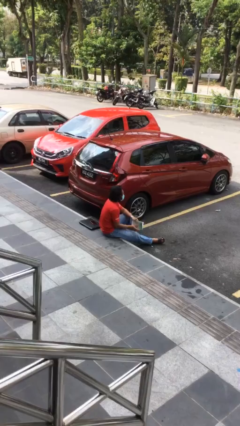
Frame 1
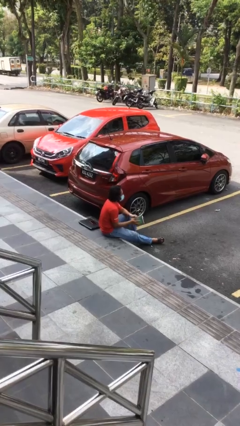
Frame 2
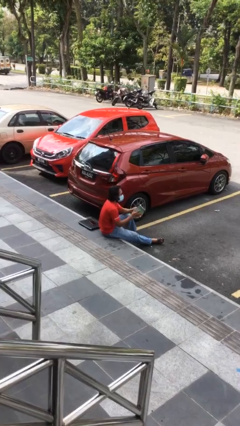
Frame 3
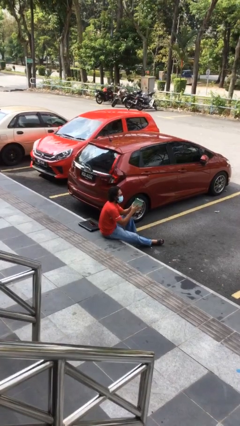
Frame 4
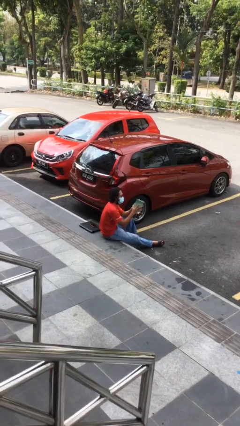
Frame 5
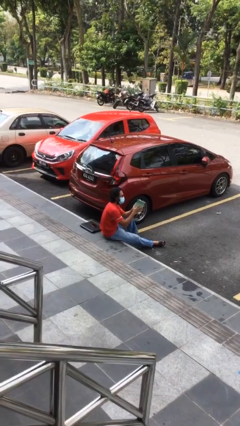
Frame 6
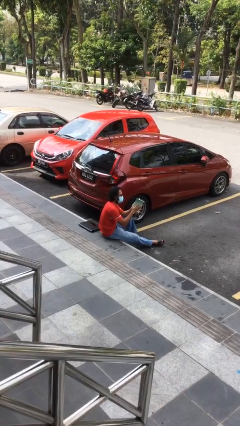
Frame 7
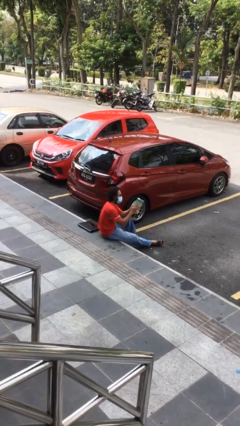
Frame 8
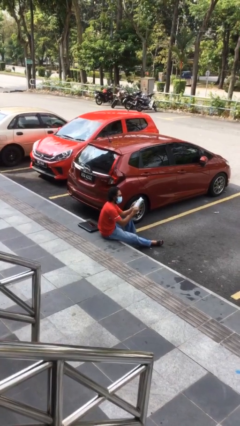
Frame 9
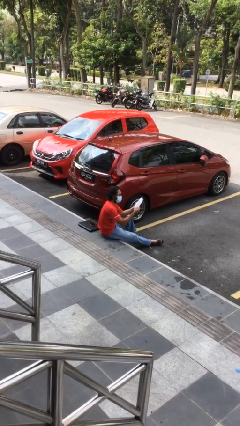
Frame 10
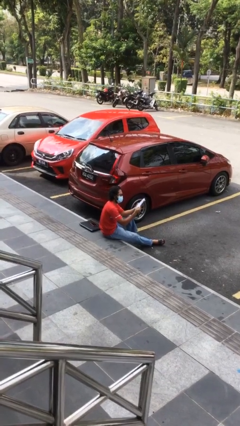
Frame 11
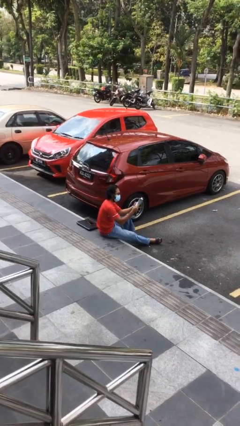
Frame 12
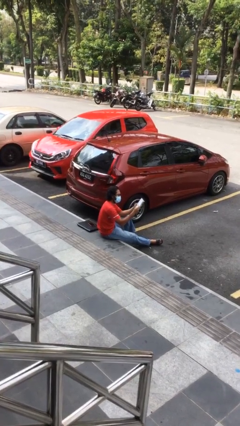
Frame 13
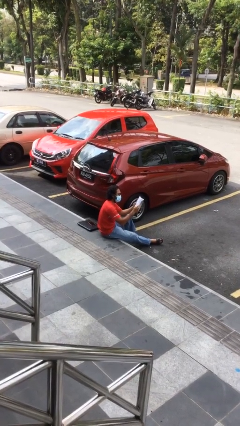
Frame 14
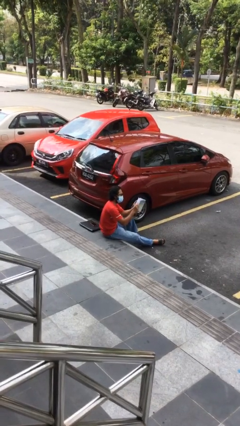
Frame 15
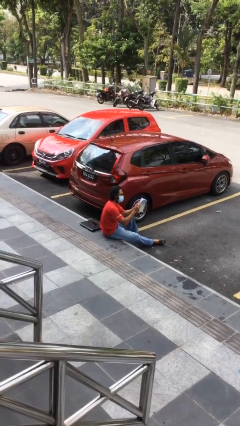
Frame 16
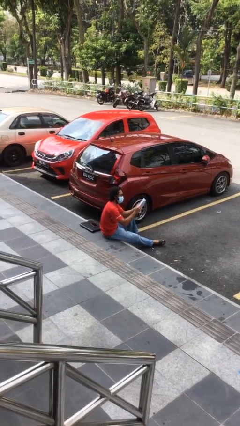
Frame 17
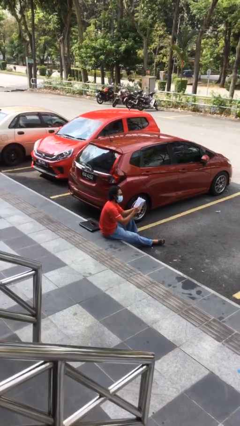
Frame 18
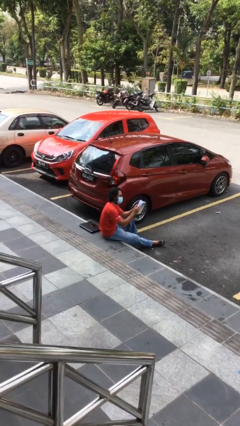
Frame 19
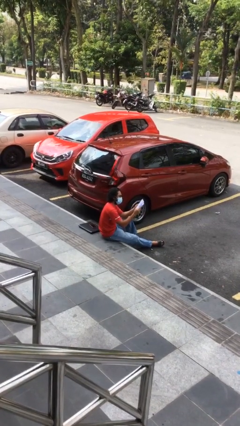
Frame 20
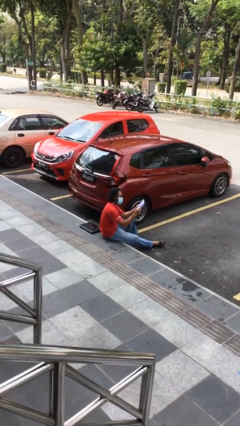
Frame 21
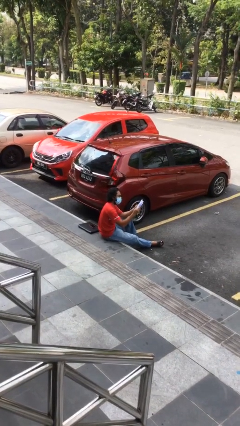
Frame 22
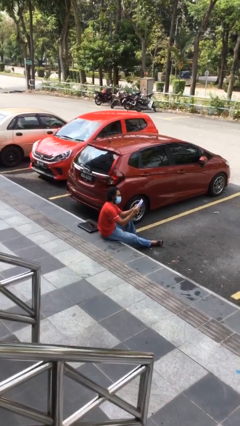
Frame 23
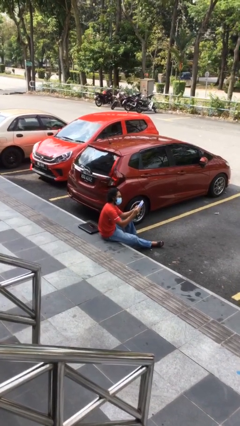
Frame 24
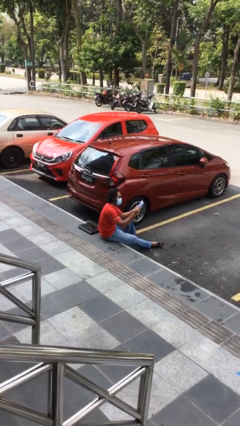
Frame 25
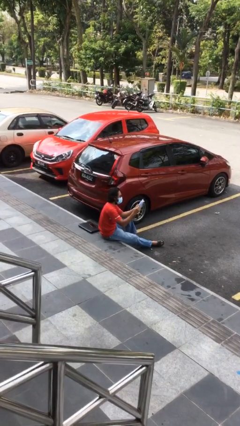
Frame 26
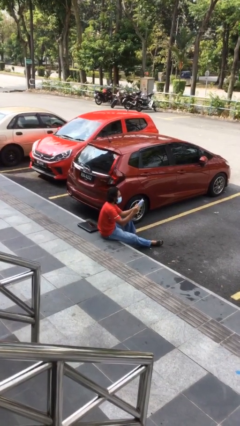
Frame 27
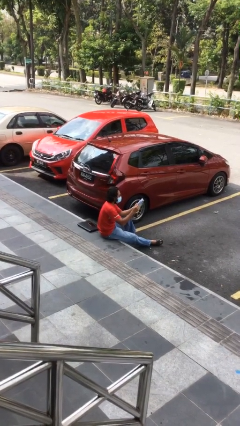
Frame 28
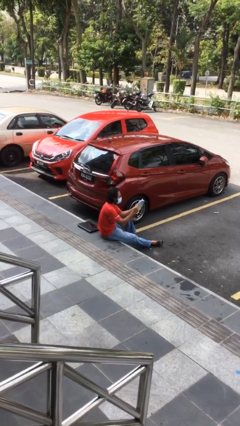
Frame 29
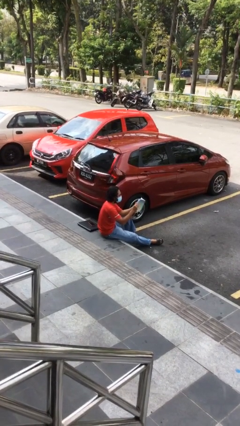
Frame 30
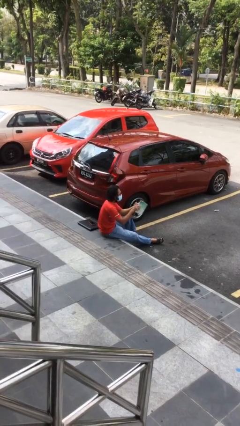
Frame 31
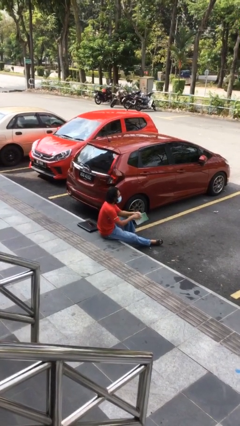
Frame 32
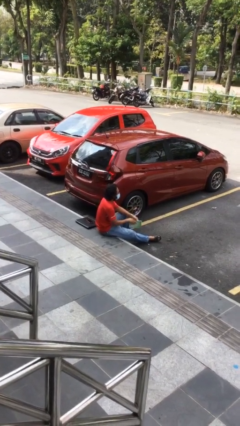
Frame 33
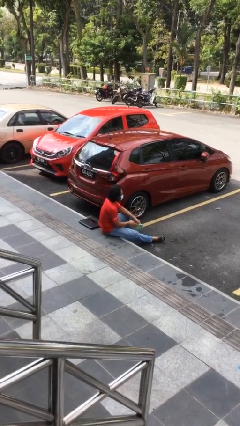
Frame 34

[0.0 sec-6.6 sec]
person reads document

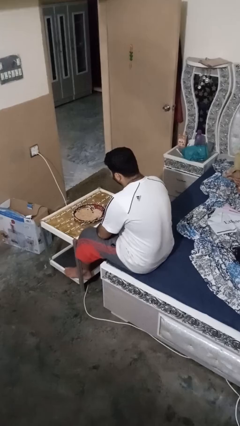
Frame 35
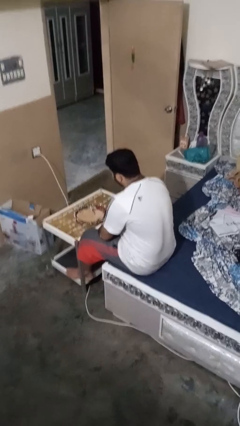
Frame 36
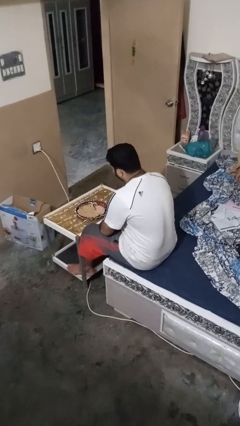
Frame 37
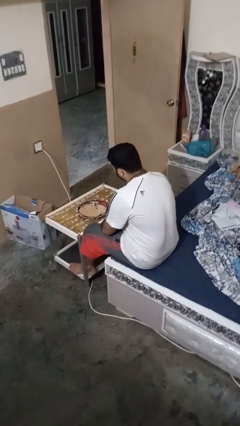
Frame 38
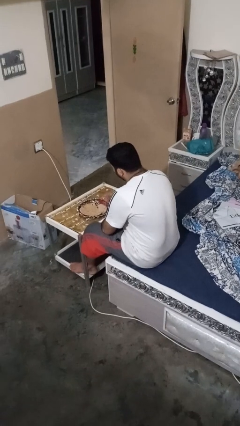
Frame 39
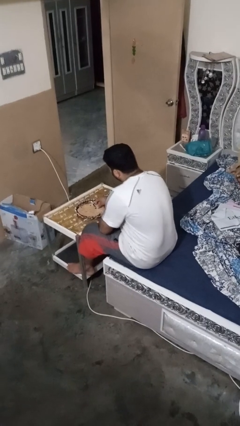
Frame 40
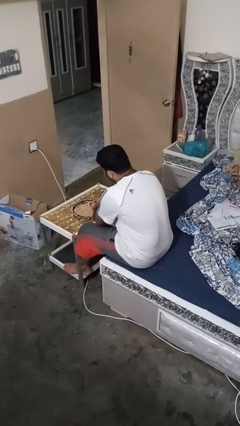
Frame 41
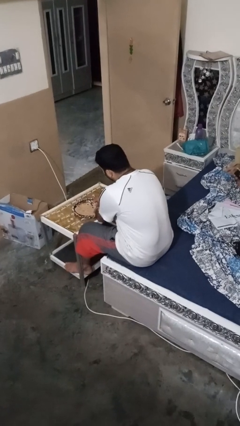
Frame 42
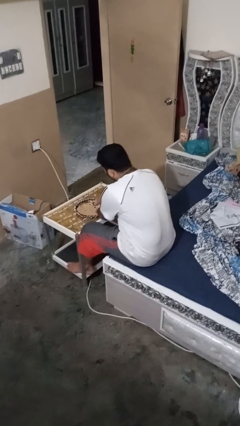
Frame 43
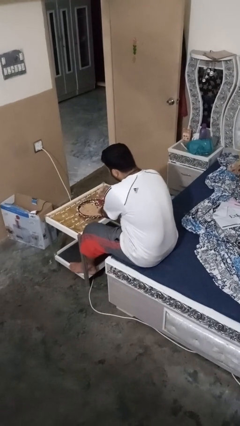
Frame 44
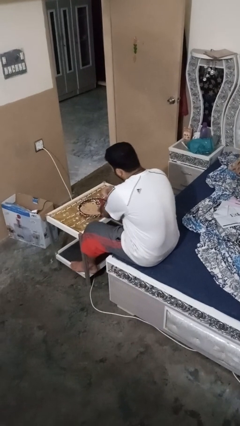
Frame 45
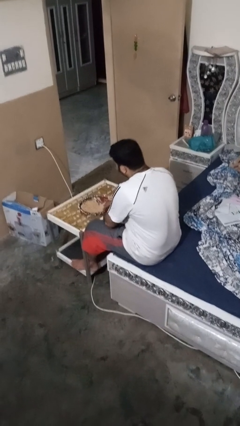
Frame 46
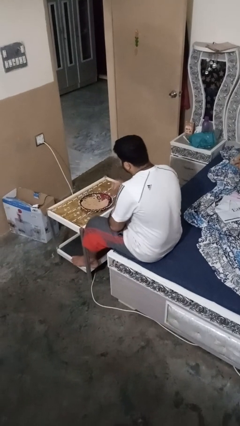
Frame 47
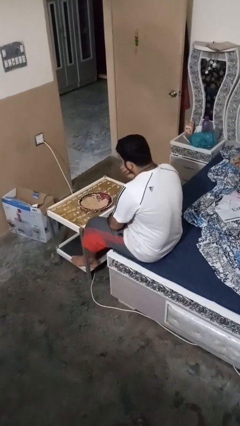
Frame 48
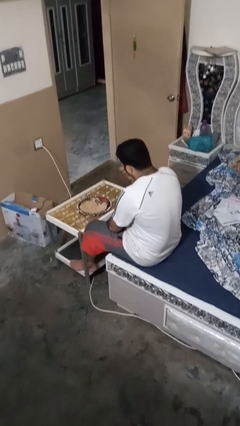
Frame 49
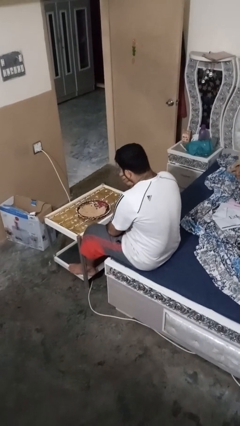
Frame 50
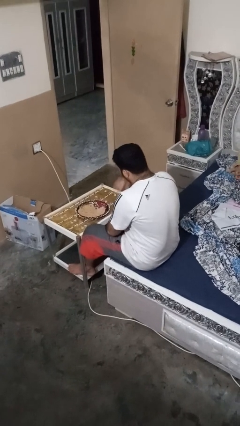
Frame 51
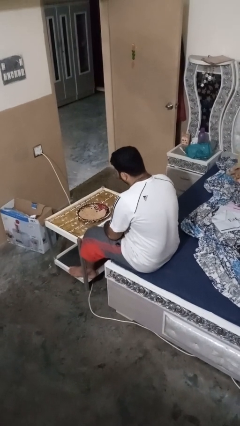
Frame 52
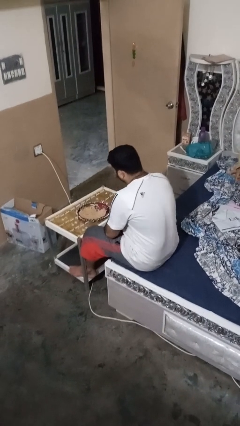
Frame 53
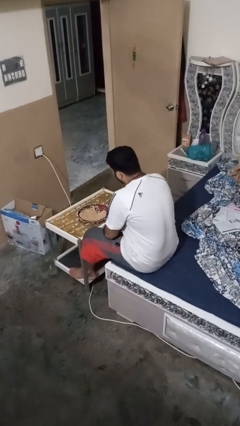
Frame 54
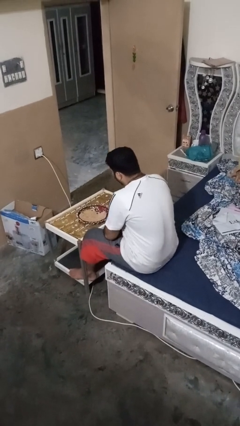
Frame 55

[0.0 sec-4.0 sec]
person eats with hands

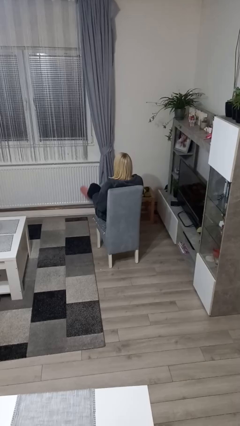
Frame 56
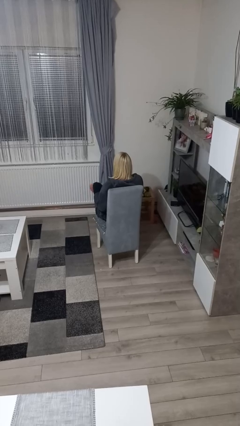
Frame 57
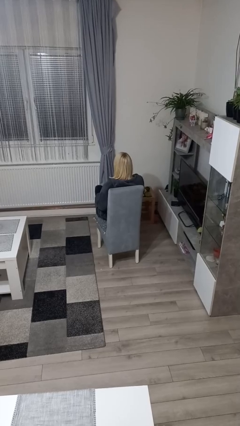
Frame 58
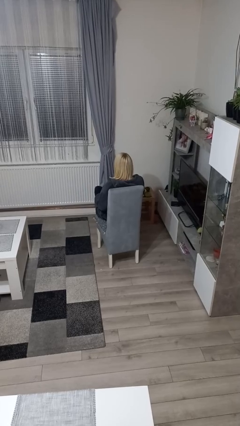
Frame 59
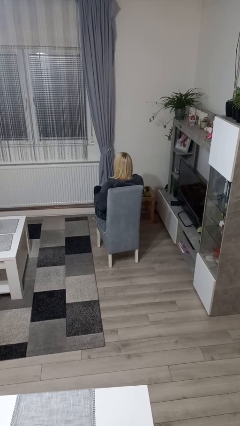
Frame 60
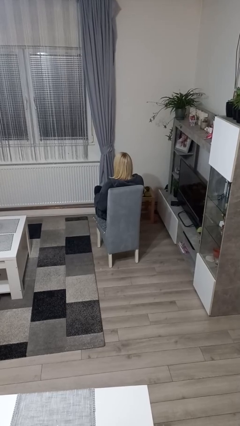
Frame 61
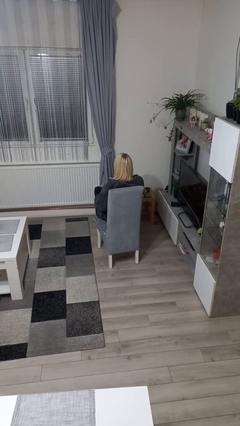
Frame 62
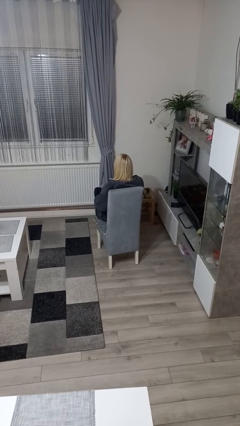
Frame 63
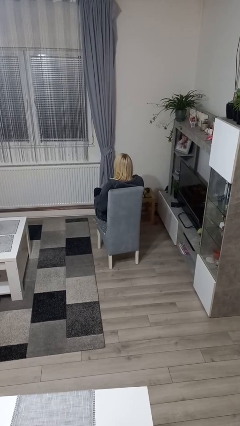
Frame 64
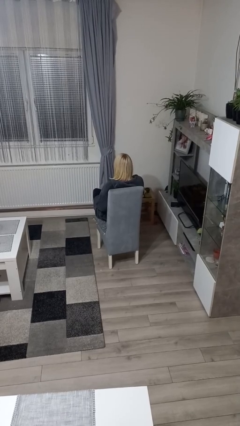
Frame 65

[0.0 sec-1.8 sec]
person crosses legs

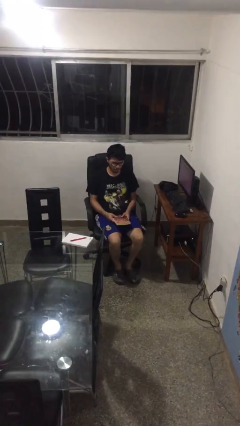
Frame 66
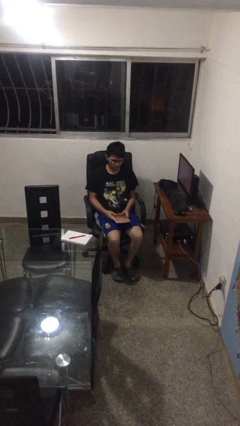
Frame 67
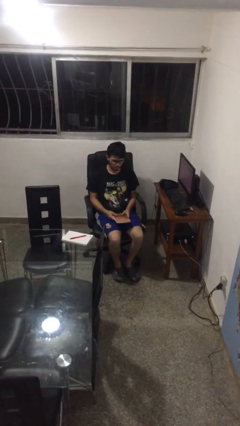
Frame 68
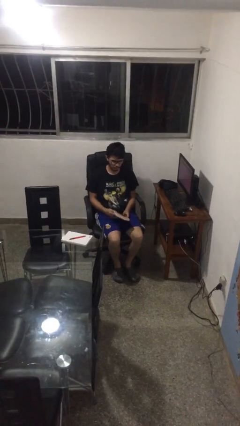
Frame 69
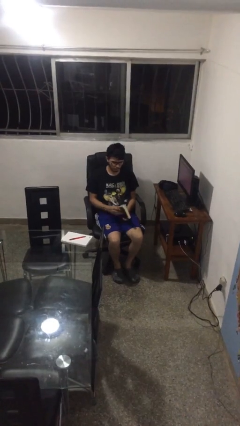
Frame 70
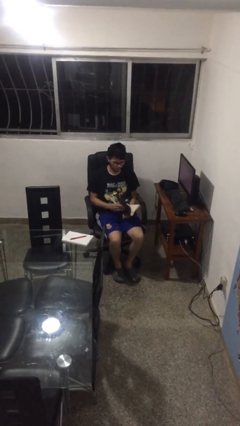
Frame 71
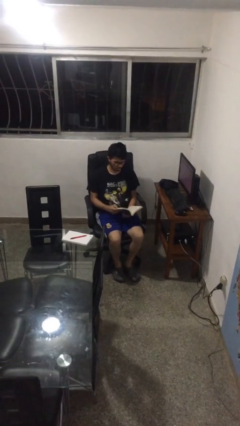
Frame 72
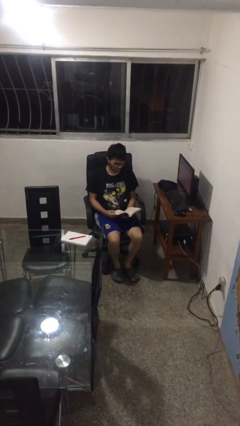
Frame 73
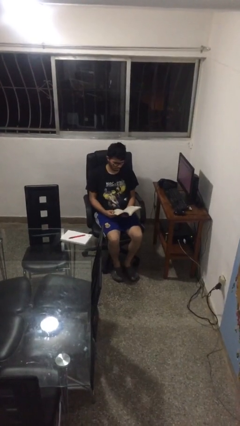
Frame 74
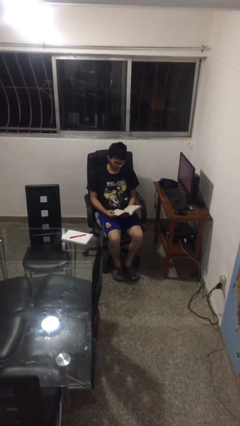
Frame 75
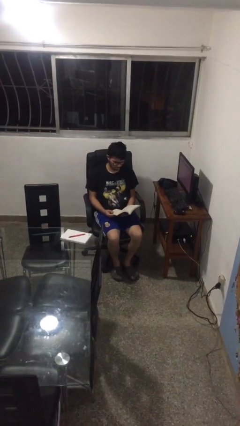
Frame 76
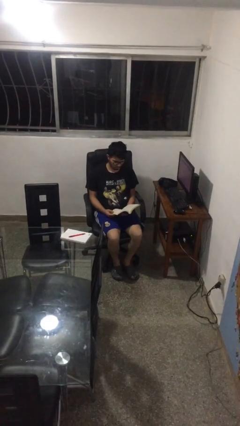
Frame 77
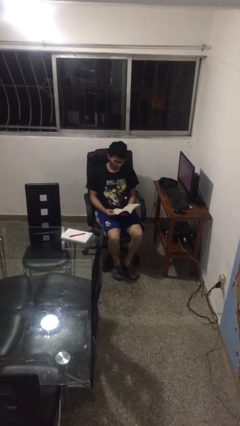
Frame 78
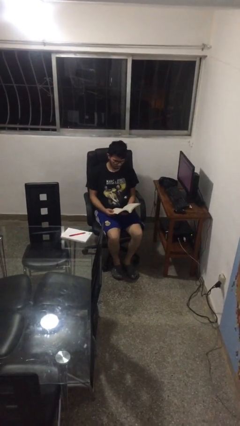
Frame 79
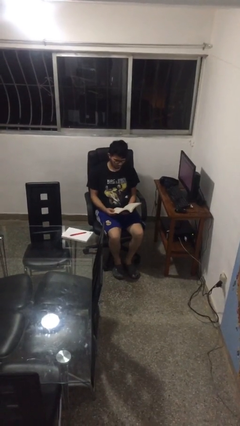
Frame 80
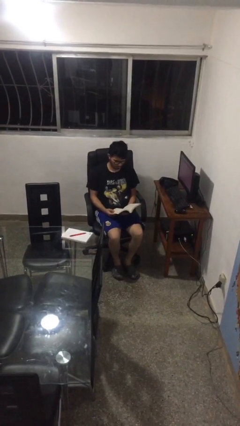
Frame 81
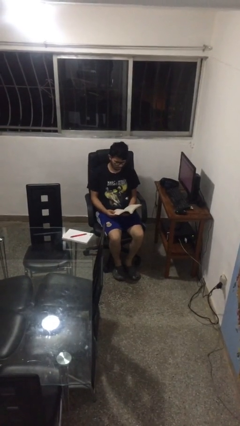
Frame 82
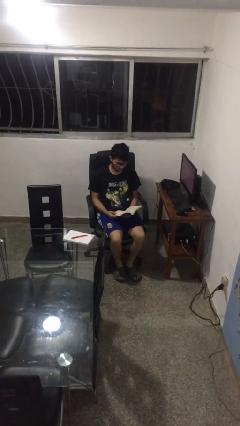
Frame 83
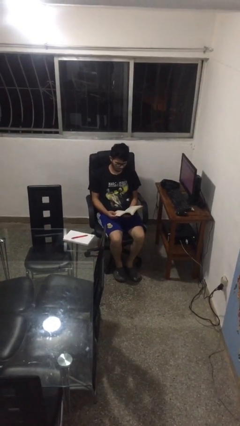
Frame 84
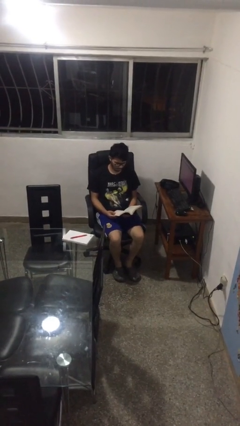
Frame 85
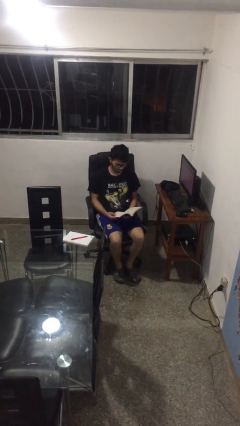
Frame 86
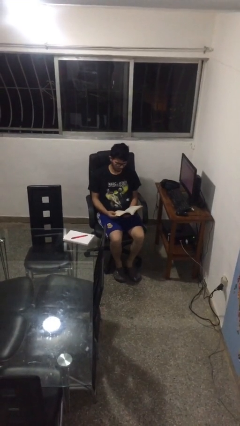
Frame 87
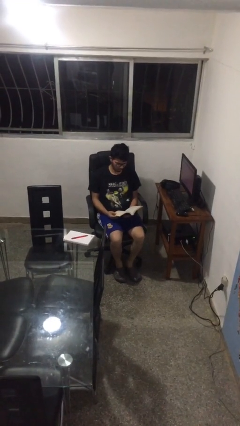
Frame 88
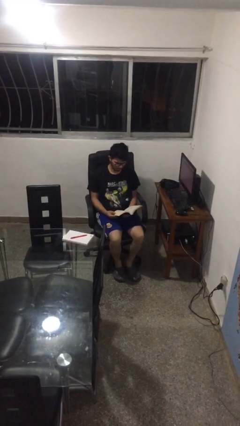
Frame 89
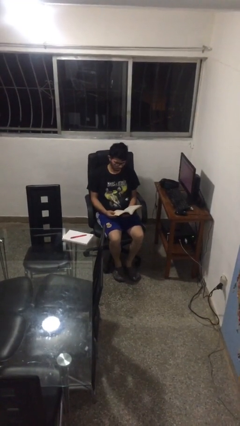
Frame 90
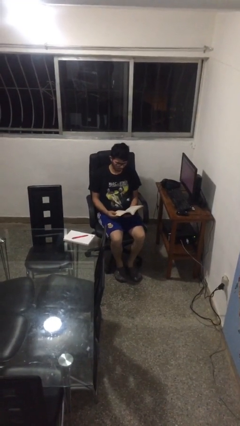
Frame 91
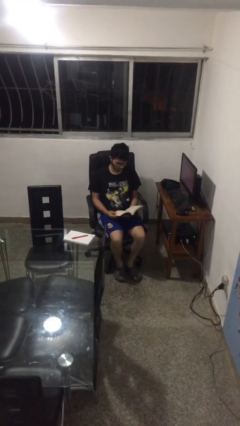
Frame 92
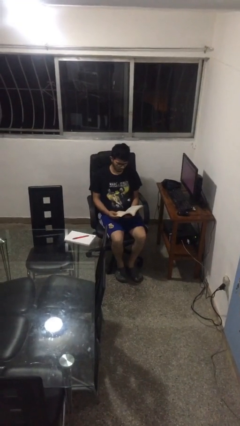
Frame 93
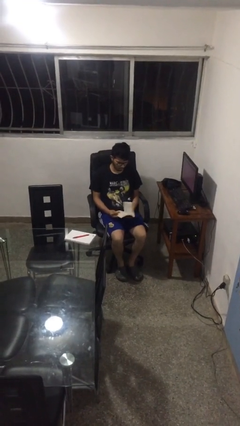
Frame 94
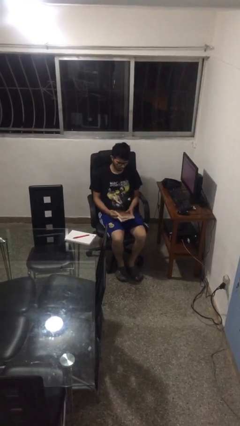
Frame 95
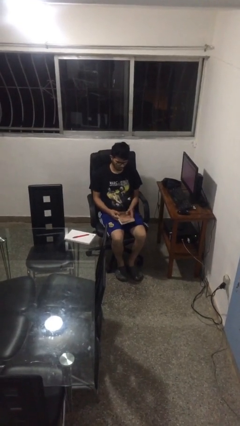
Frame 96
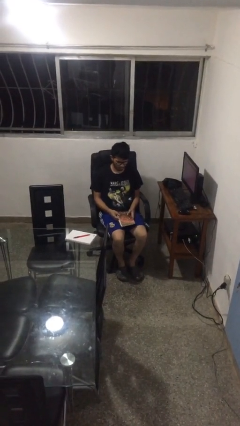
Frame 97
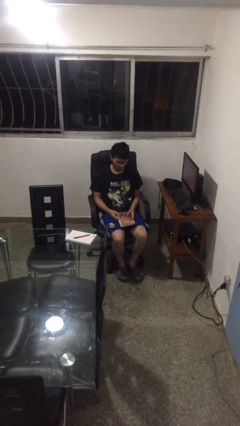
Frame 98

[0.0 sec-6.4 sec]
person reads book
